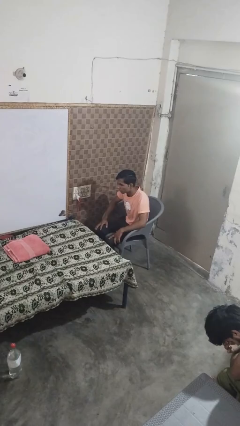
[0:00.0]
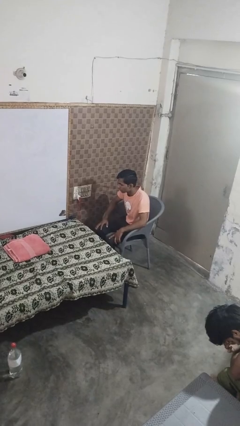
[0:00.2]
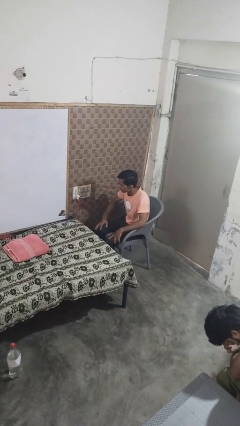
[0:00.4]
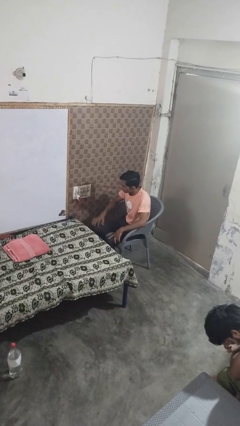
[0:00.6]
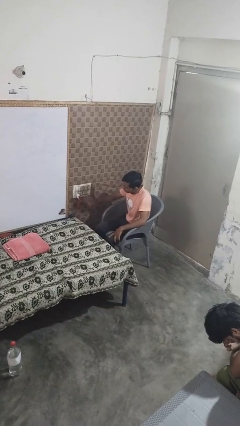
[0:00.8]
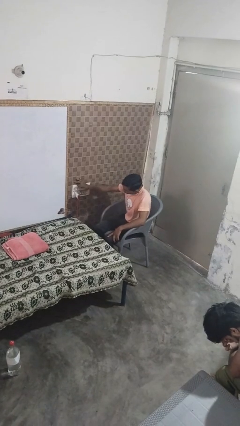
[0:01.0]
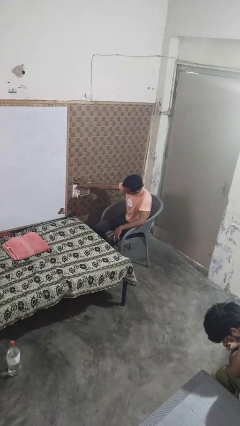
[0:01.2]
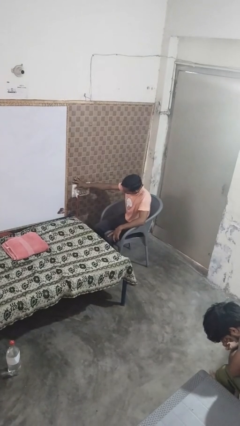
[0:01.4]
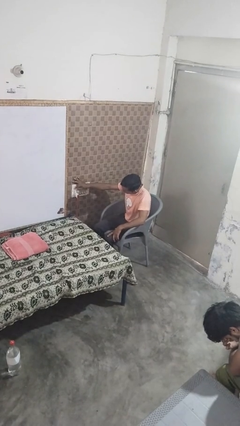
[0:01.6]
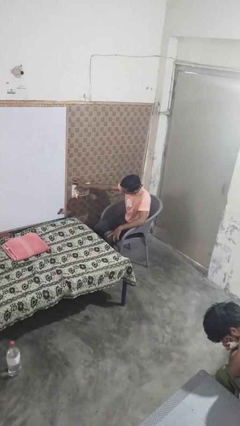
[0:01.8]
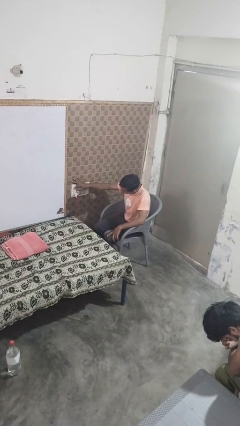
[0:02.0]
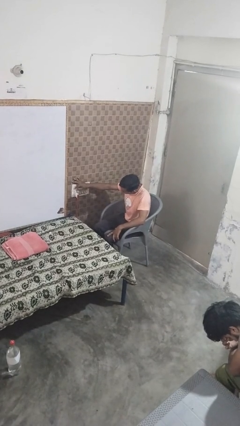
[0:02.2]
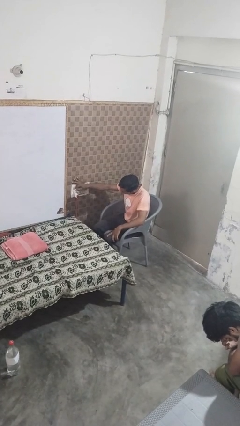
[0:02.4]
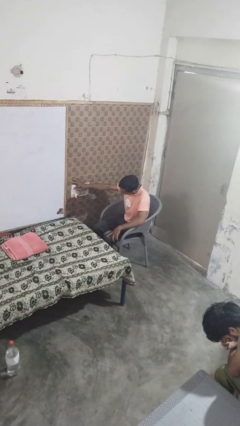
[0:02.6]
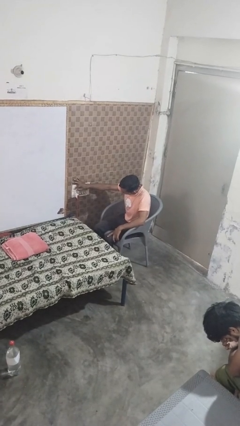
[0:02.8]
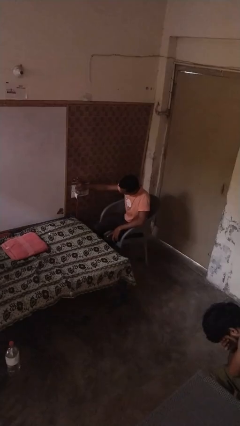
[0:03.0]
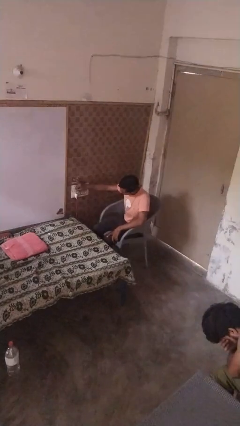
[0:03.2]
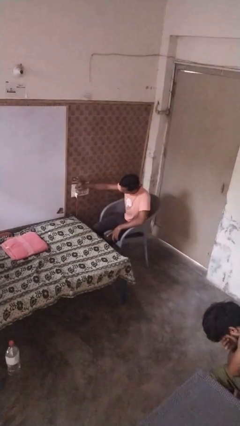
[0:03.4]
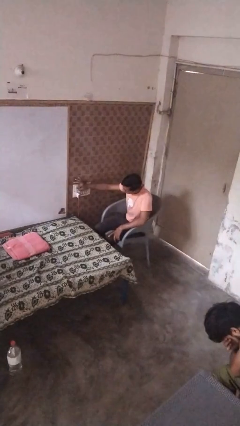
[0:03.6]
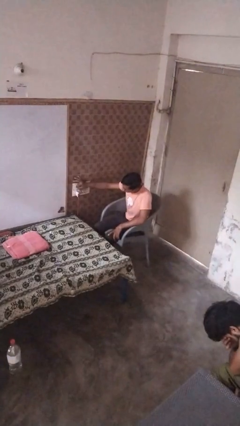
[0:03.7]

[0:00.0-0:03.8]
person adjusts thermostat

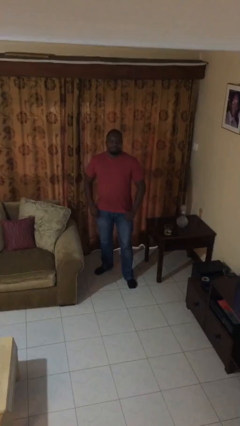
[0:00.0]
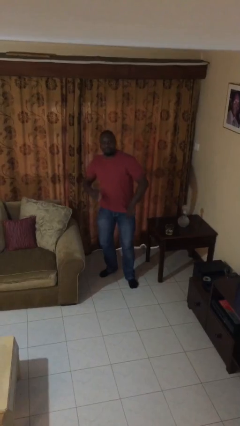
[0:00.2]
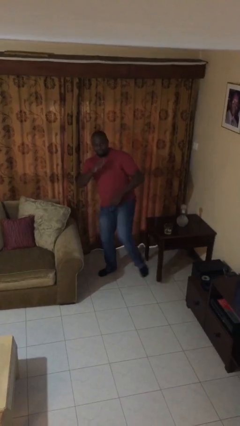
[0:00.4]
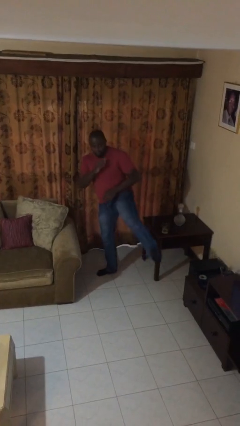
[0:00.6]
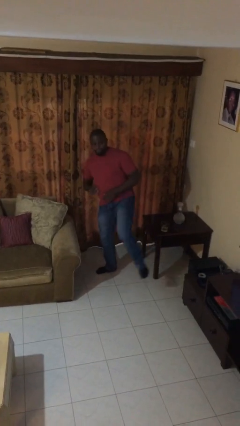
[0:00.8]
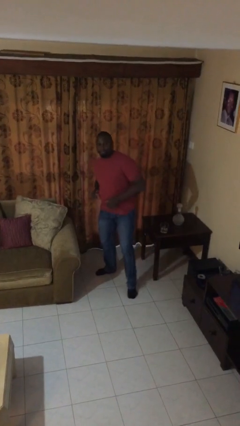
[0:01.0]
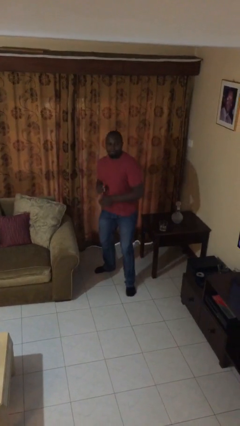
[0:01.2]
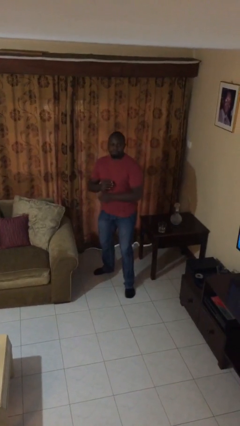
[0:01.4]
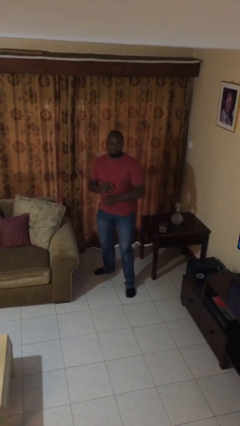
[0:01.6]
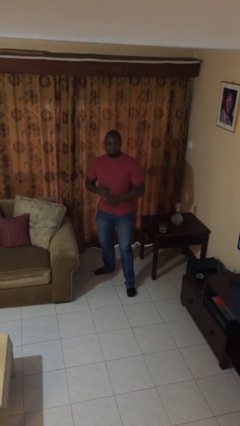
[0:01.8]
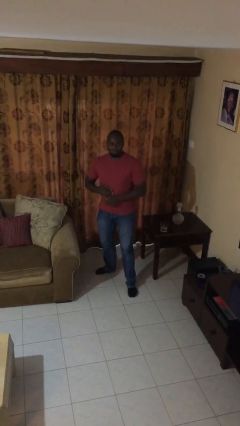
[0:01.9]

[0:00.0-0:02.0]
person karate kicks

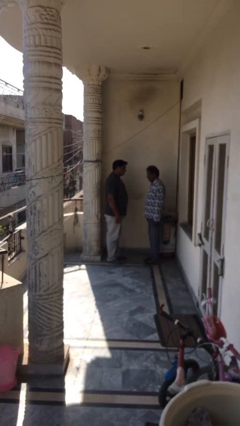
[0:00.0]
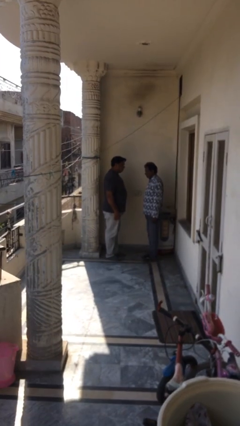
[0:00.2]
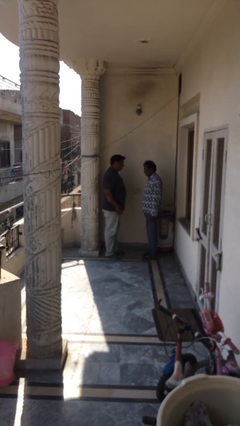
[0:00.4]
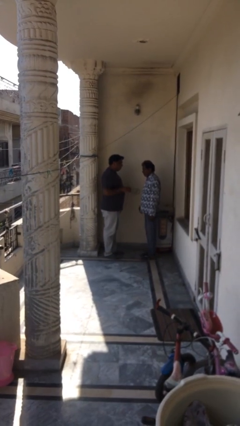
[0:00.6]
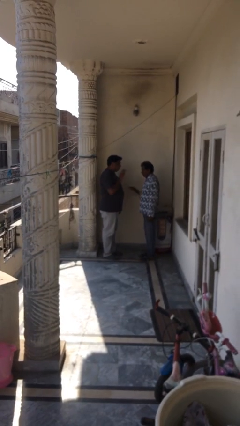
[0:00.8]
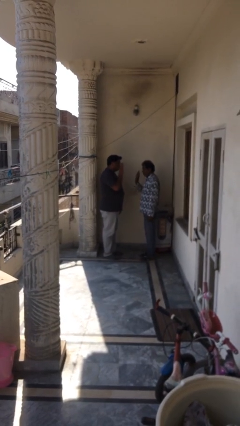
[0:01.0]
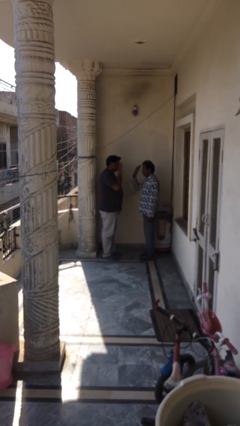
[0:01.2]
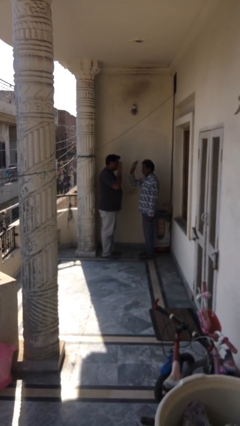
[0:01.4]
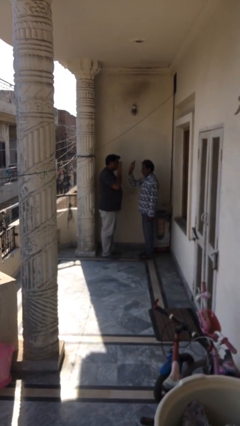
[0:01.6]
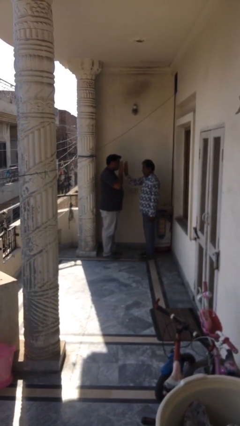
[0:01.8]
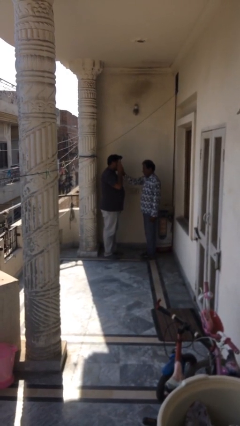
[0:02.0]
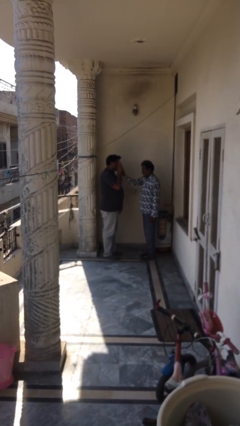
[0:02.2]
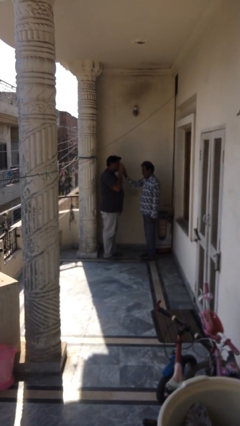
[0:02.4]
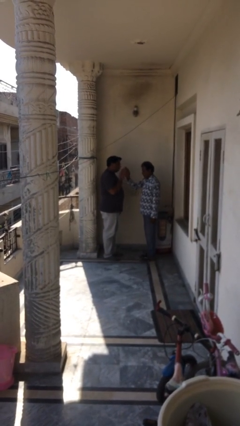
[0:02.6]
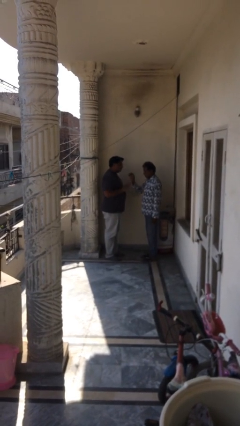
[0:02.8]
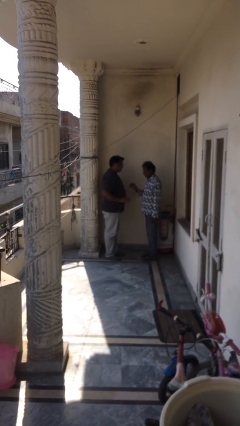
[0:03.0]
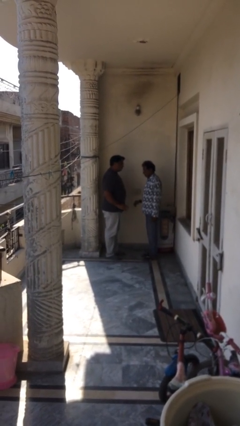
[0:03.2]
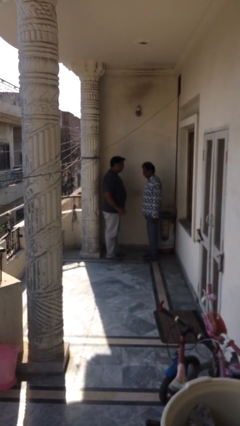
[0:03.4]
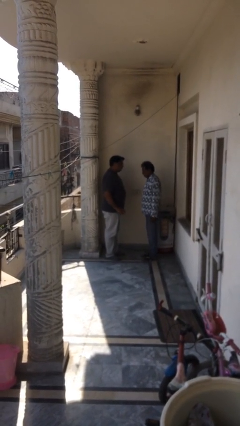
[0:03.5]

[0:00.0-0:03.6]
person highfives hand

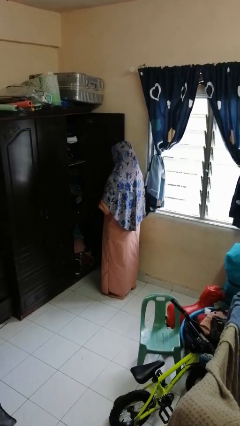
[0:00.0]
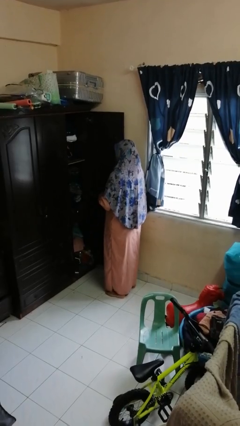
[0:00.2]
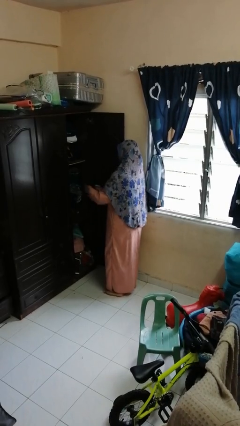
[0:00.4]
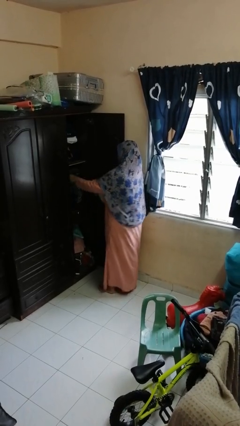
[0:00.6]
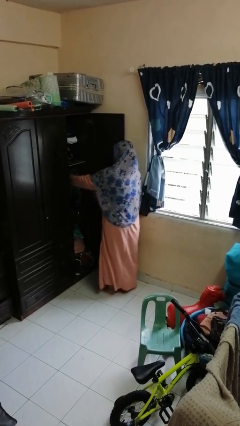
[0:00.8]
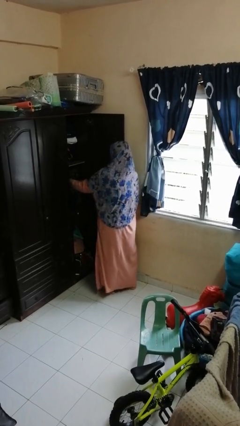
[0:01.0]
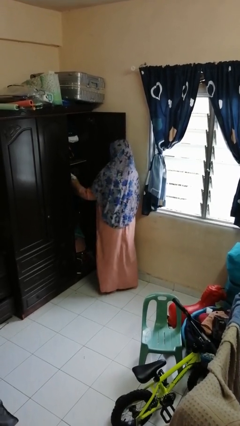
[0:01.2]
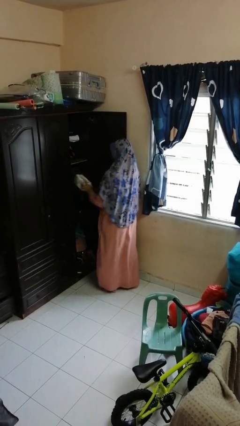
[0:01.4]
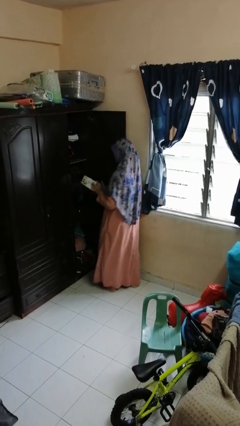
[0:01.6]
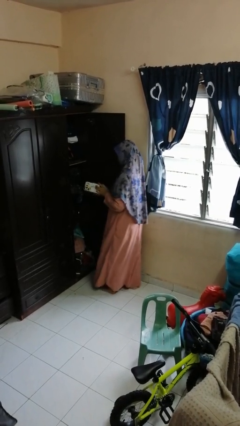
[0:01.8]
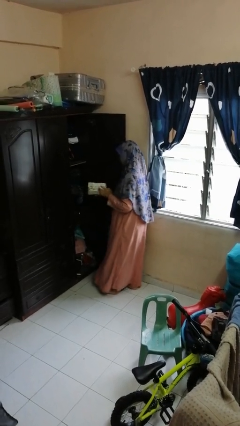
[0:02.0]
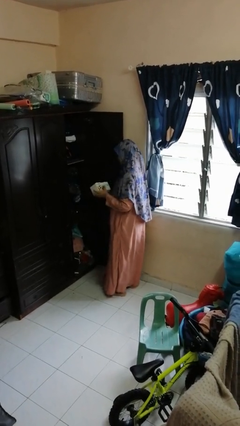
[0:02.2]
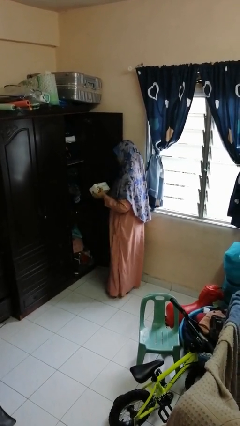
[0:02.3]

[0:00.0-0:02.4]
person picks up object from cabinet

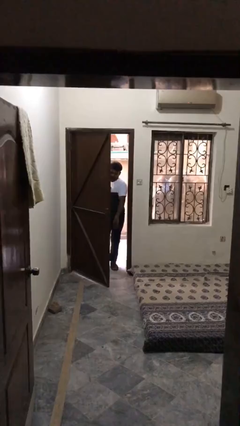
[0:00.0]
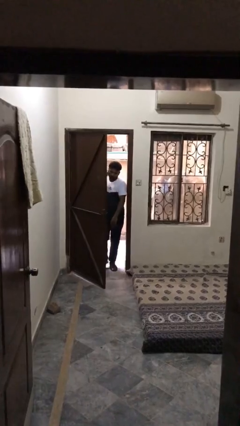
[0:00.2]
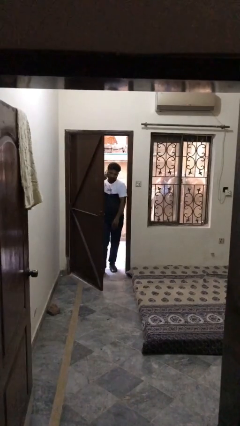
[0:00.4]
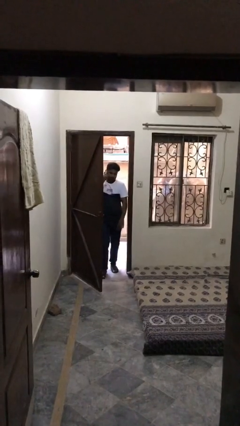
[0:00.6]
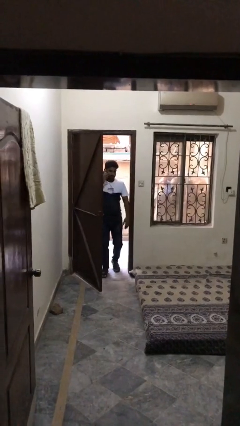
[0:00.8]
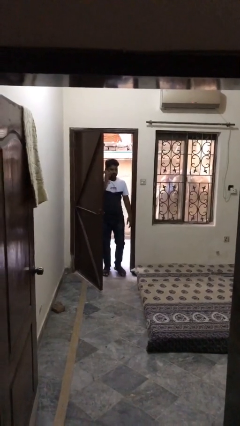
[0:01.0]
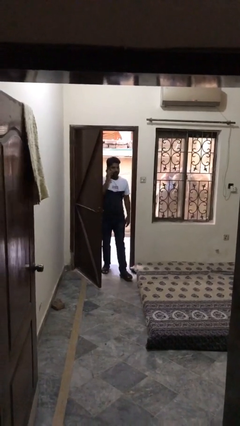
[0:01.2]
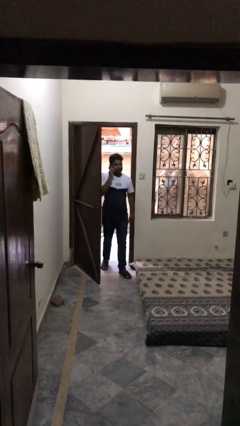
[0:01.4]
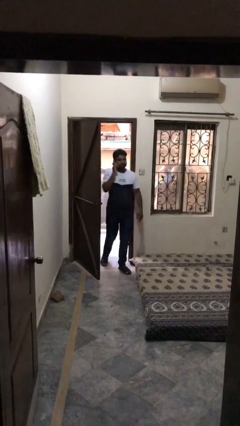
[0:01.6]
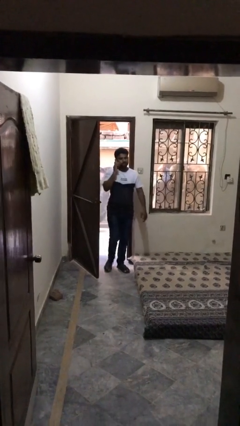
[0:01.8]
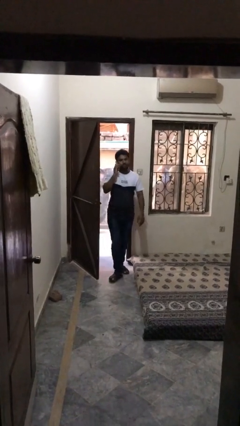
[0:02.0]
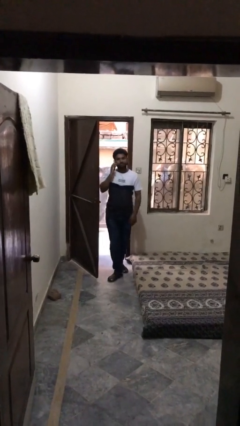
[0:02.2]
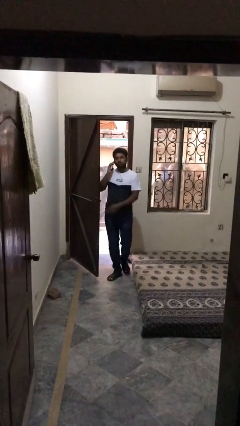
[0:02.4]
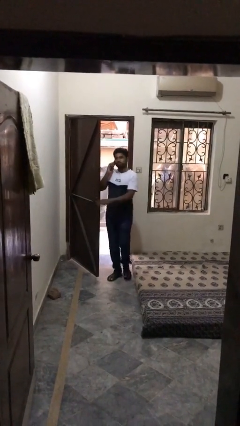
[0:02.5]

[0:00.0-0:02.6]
person enters scene through structure

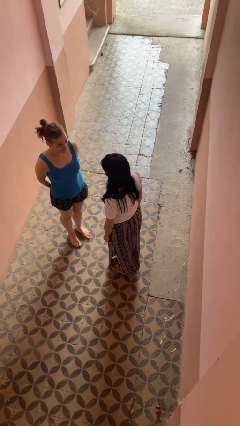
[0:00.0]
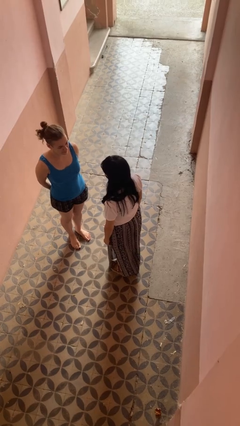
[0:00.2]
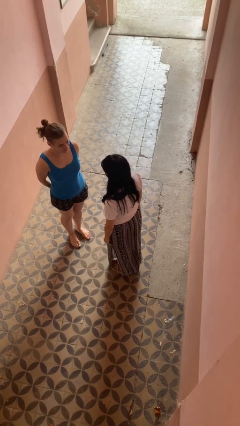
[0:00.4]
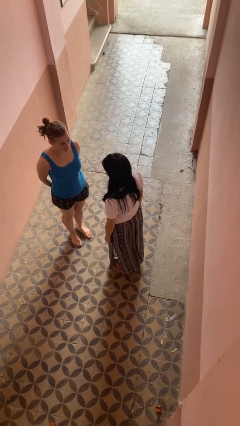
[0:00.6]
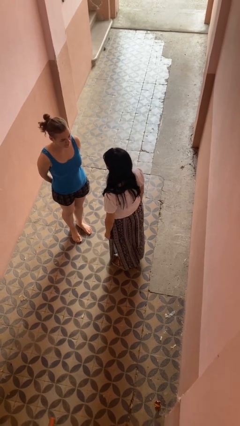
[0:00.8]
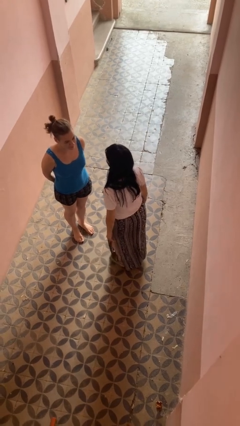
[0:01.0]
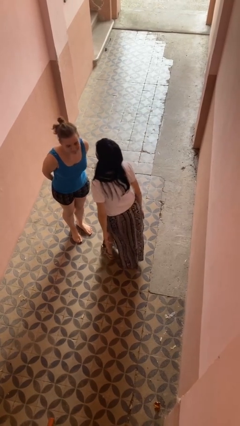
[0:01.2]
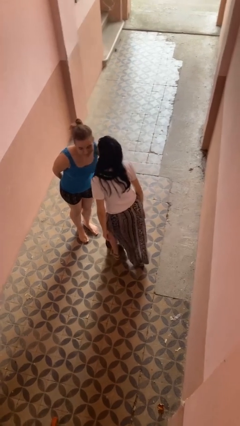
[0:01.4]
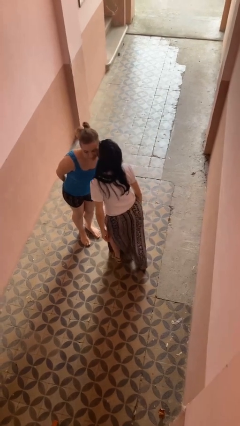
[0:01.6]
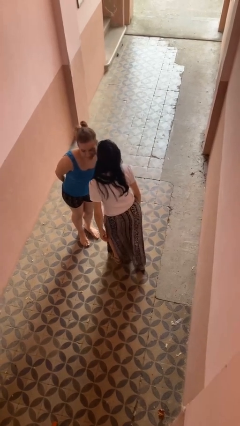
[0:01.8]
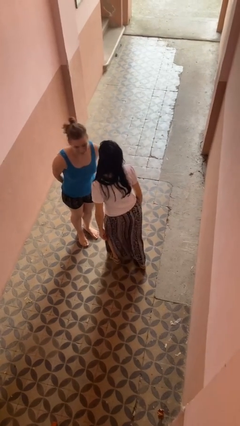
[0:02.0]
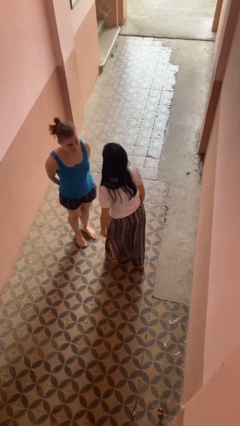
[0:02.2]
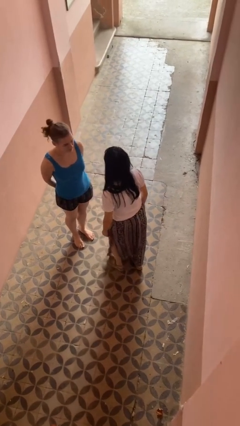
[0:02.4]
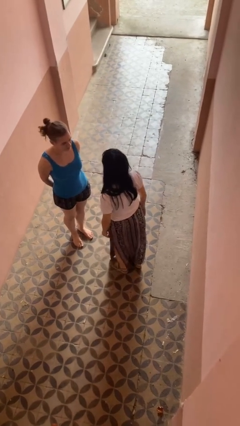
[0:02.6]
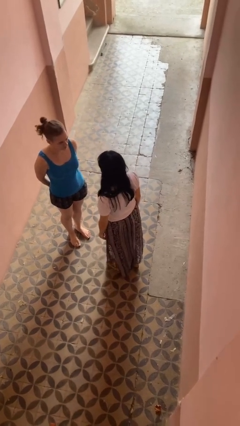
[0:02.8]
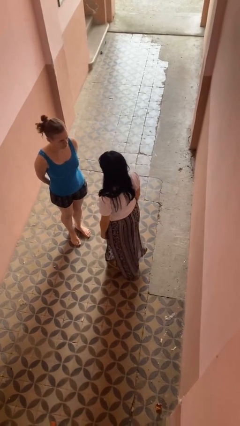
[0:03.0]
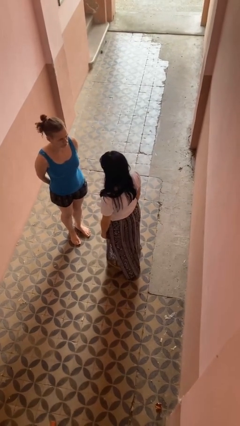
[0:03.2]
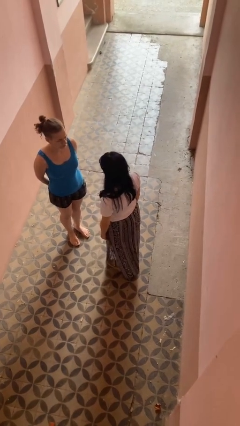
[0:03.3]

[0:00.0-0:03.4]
person kisses cheek of person
